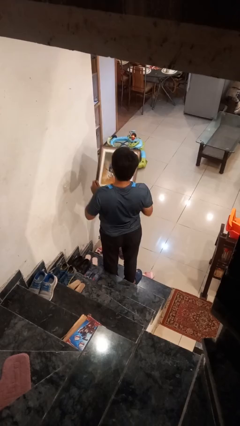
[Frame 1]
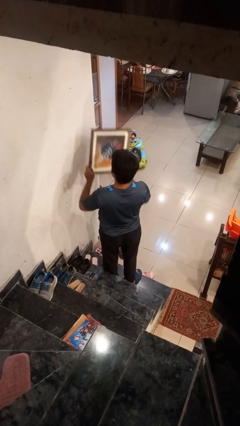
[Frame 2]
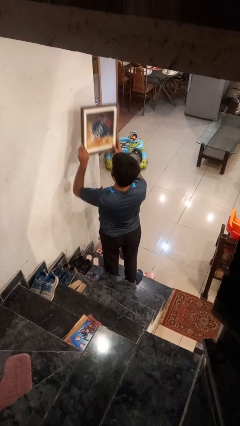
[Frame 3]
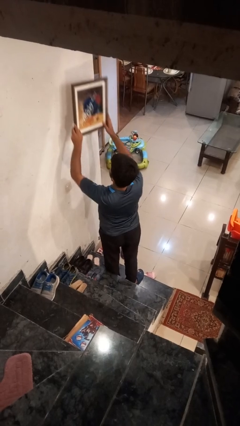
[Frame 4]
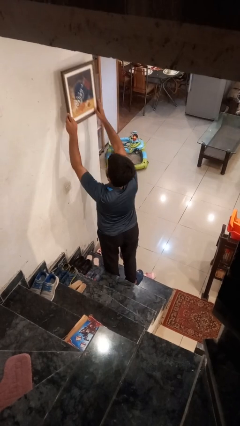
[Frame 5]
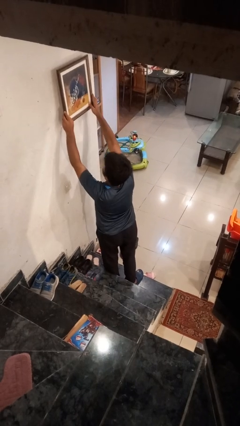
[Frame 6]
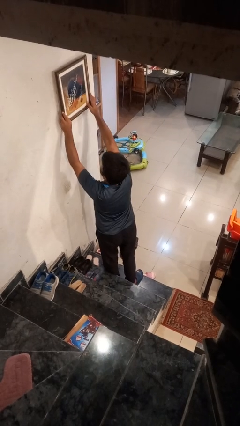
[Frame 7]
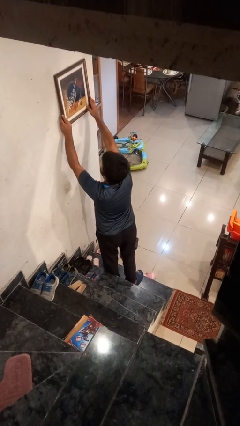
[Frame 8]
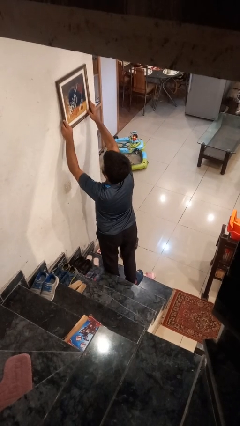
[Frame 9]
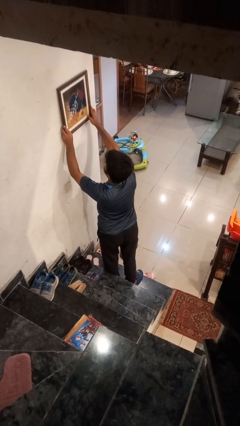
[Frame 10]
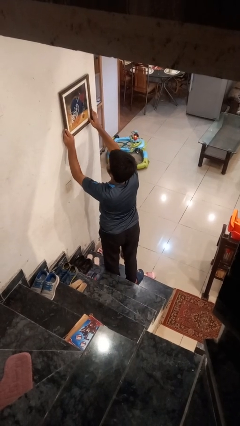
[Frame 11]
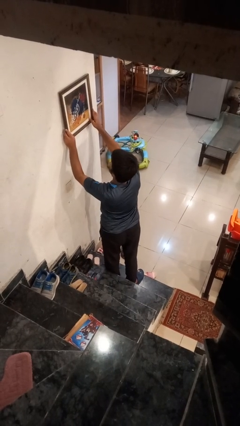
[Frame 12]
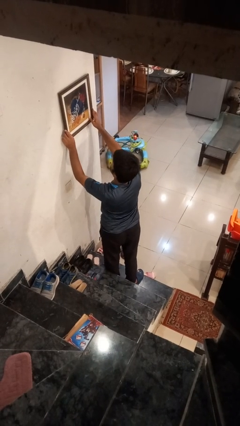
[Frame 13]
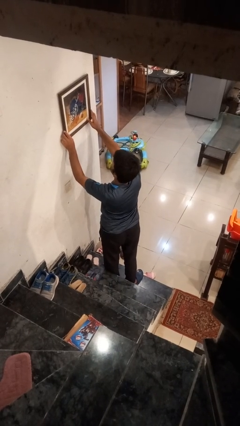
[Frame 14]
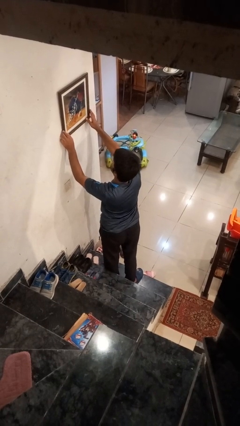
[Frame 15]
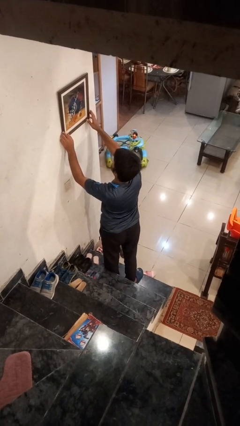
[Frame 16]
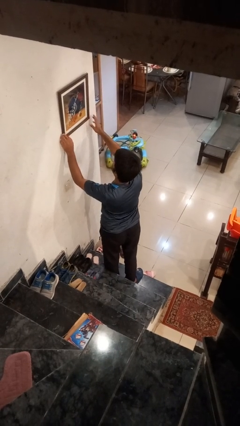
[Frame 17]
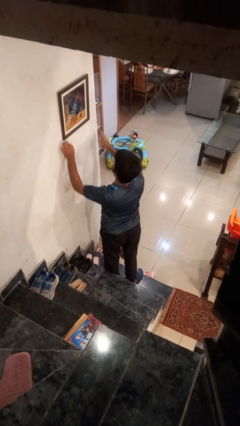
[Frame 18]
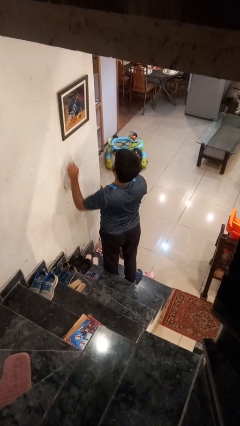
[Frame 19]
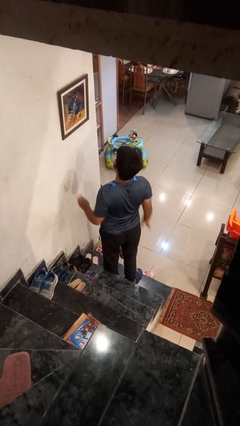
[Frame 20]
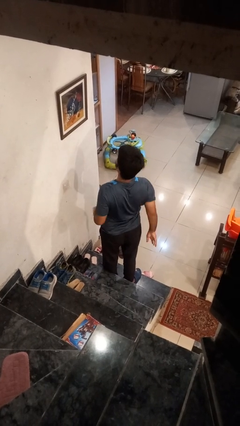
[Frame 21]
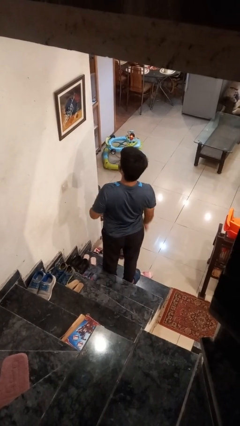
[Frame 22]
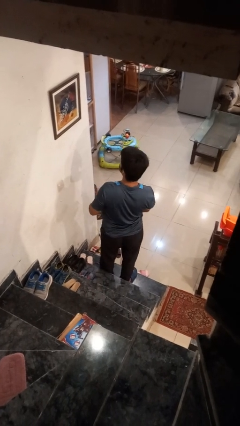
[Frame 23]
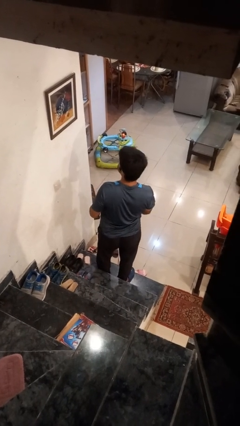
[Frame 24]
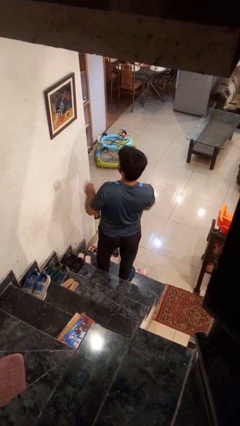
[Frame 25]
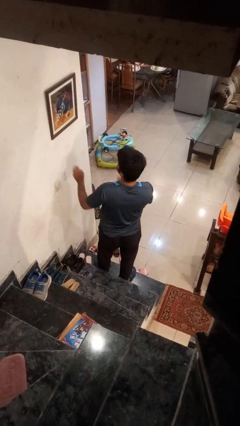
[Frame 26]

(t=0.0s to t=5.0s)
person puts up picture frame

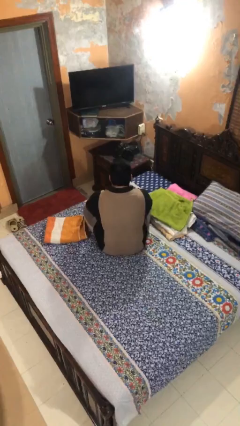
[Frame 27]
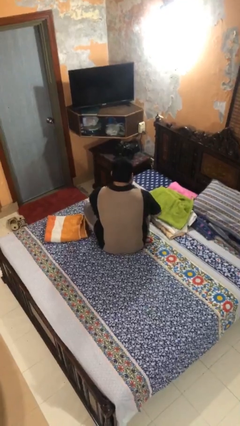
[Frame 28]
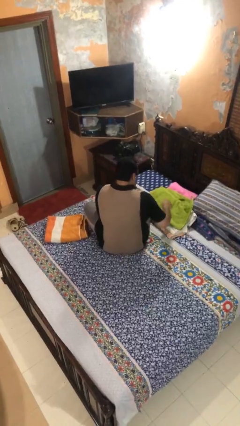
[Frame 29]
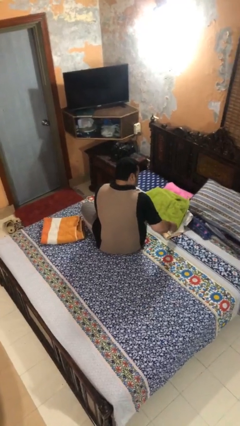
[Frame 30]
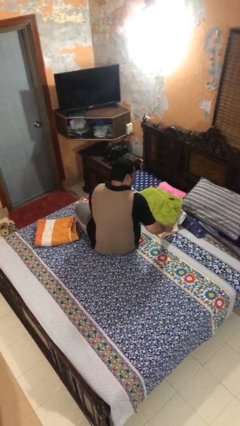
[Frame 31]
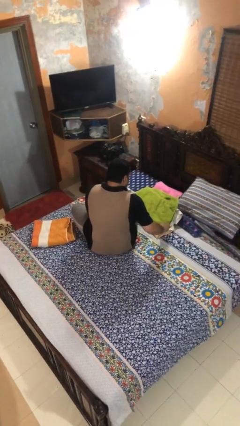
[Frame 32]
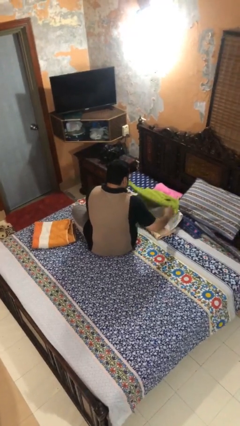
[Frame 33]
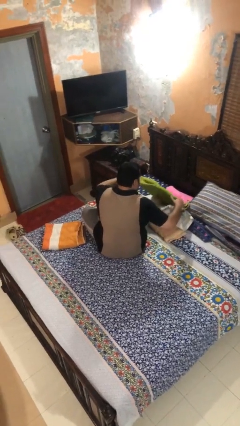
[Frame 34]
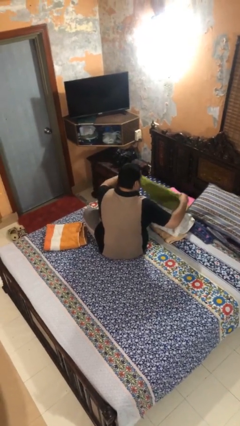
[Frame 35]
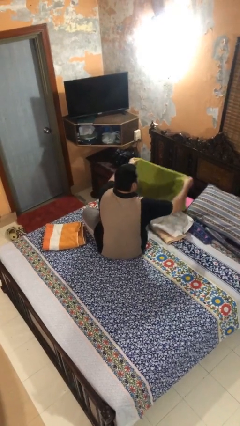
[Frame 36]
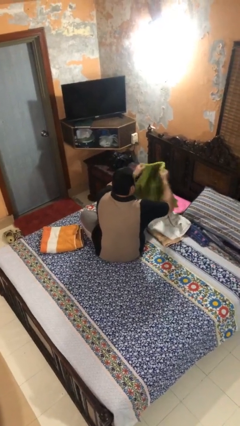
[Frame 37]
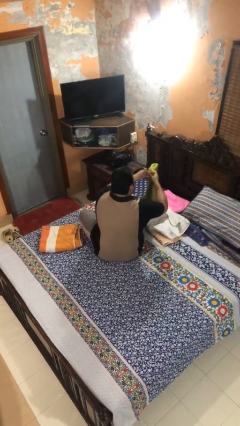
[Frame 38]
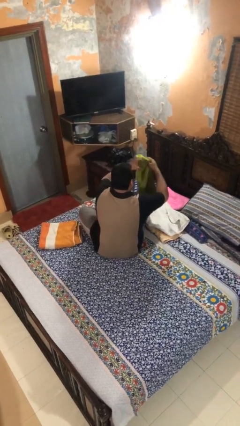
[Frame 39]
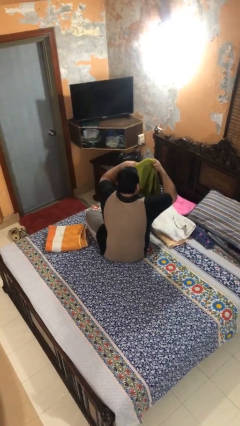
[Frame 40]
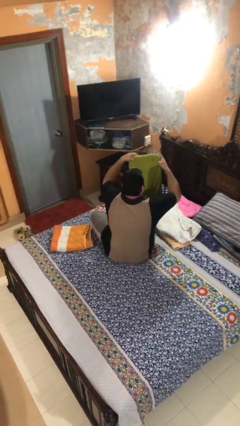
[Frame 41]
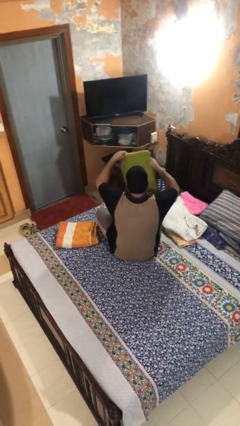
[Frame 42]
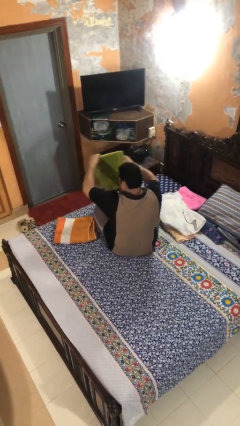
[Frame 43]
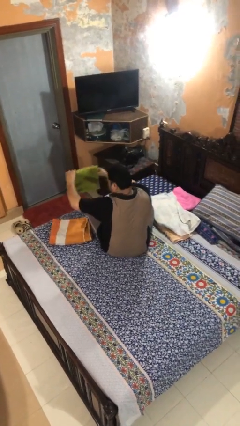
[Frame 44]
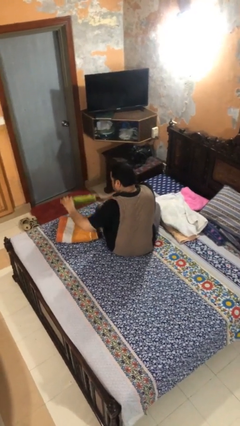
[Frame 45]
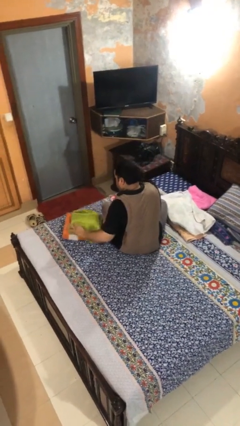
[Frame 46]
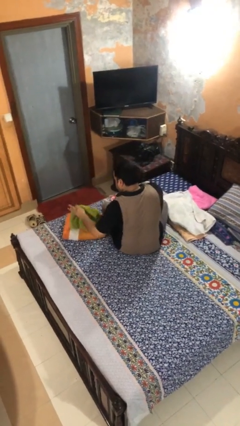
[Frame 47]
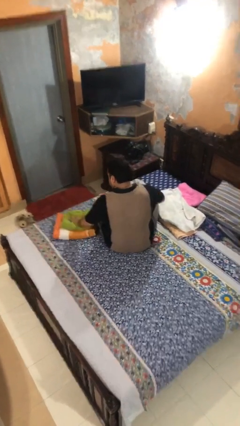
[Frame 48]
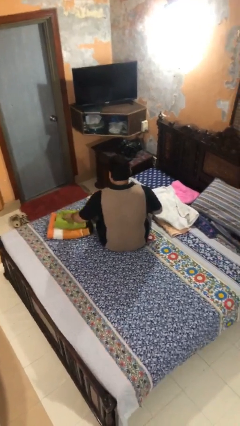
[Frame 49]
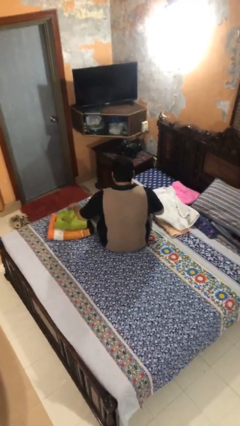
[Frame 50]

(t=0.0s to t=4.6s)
person folds towel

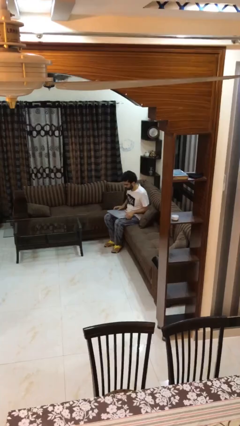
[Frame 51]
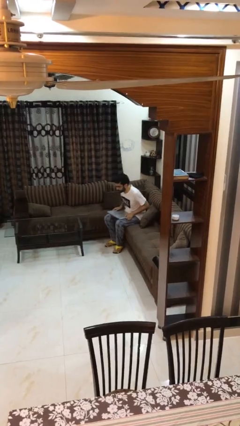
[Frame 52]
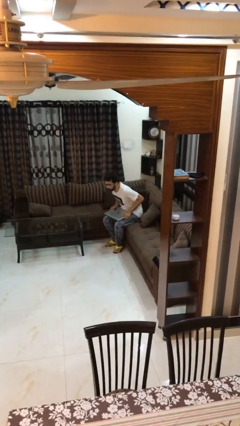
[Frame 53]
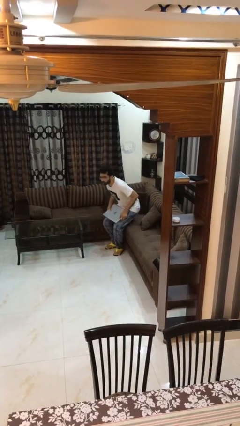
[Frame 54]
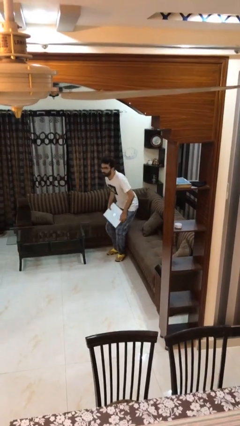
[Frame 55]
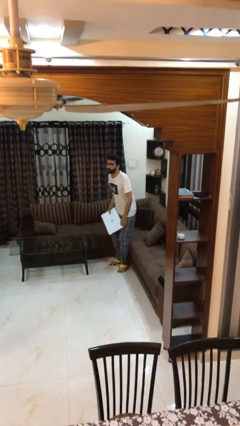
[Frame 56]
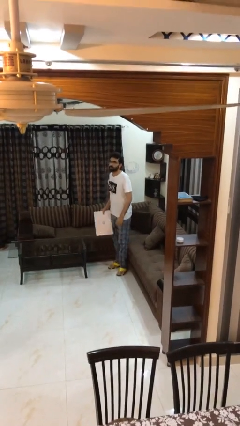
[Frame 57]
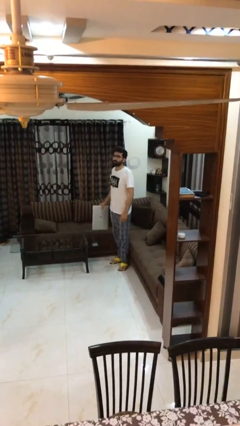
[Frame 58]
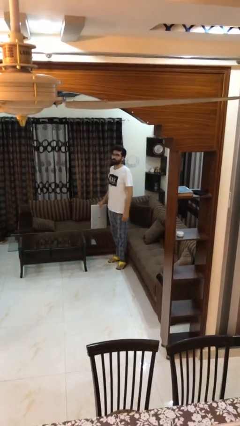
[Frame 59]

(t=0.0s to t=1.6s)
person stands up

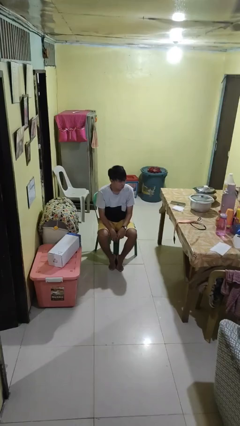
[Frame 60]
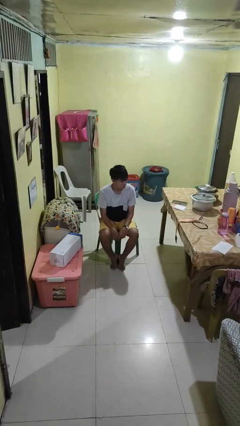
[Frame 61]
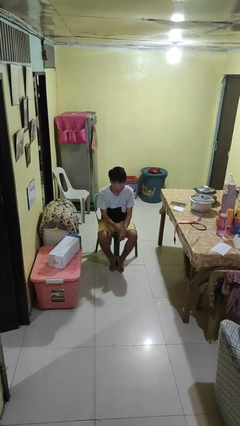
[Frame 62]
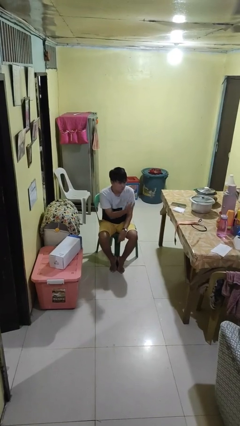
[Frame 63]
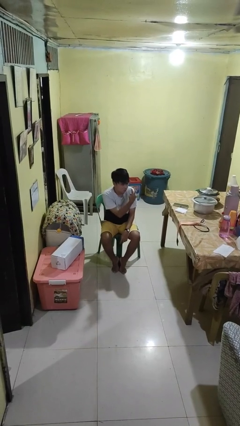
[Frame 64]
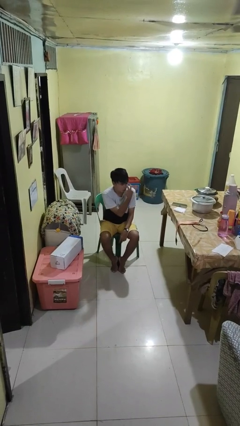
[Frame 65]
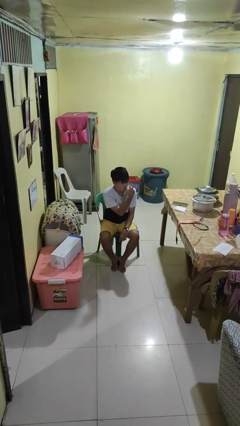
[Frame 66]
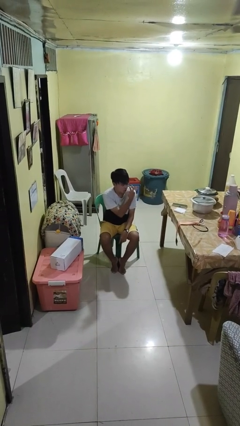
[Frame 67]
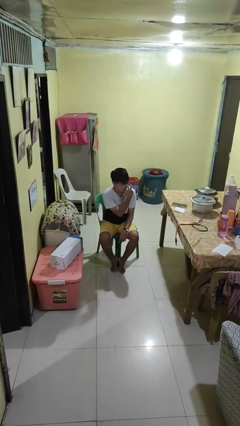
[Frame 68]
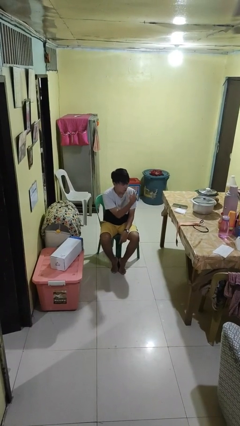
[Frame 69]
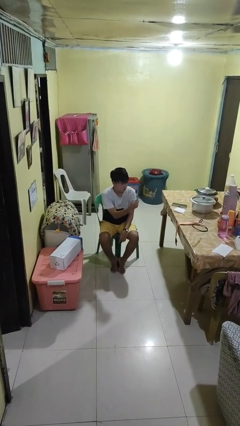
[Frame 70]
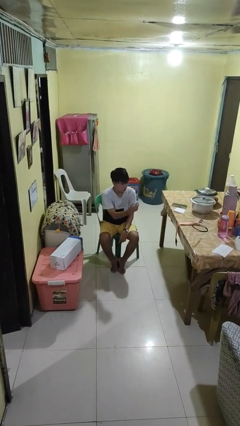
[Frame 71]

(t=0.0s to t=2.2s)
person gestures watch closely

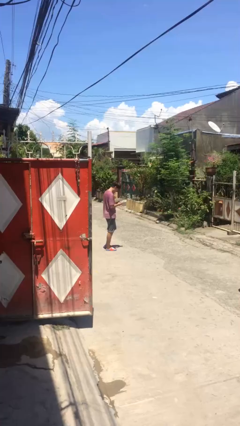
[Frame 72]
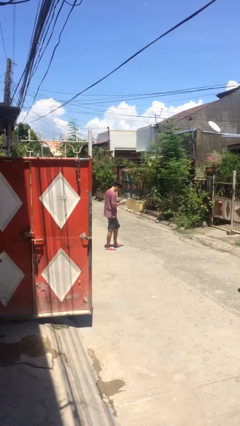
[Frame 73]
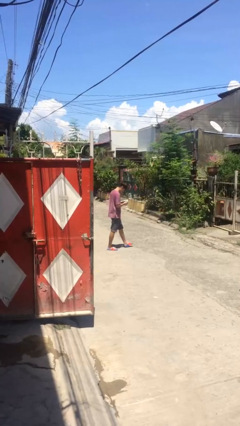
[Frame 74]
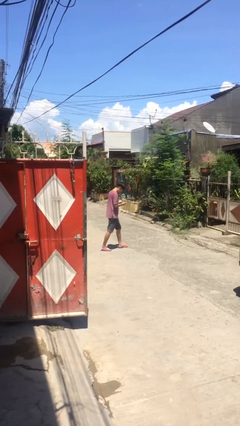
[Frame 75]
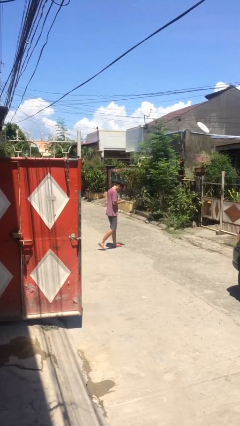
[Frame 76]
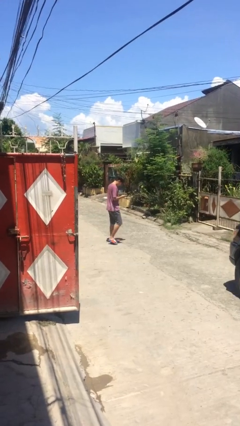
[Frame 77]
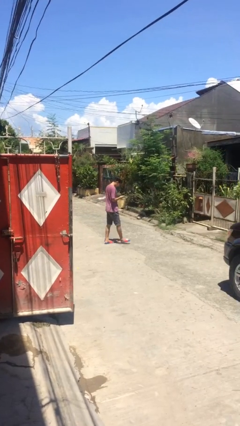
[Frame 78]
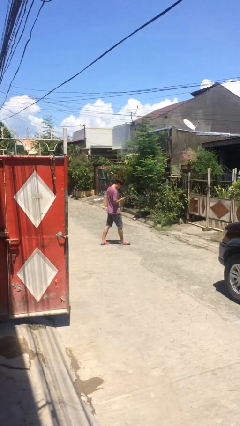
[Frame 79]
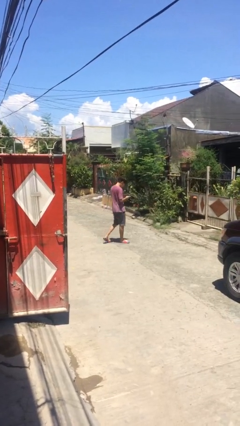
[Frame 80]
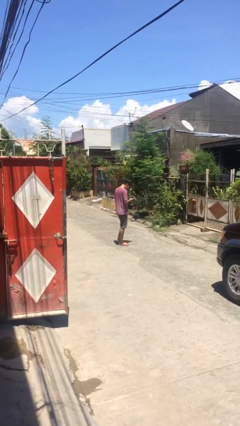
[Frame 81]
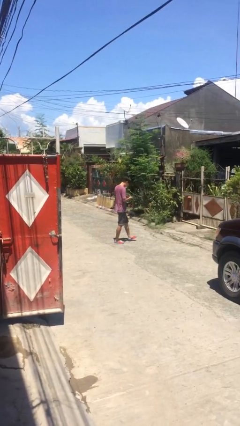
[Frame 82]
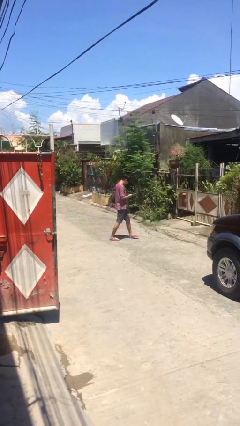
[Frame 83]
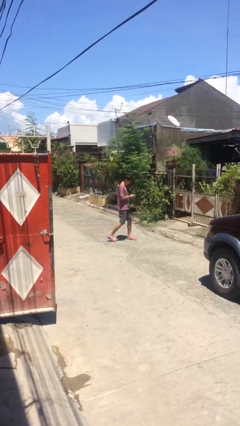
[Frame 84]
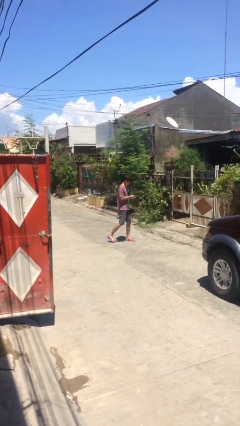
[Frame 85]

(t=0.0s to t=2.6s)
person texts on phone

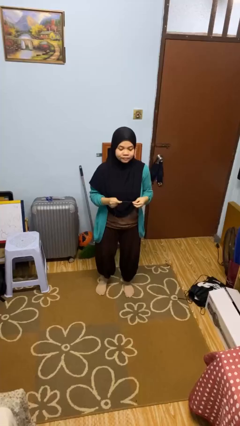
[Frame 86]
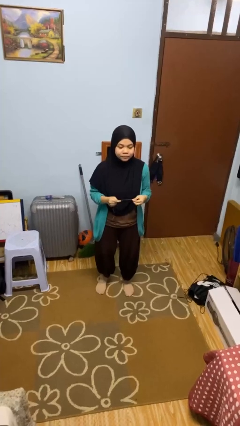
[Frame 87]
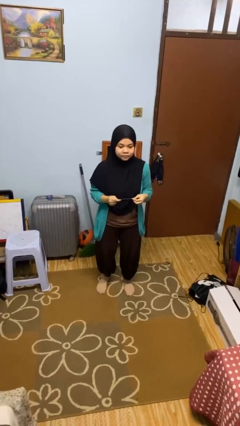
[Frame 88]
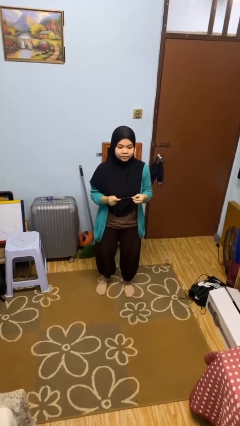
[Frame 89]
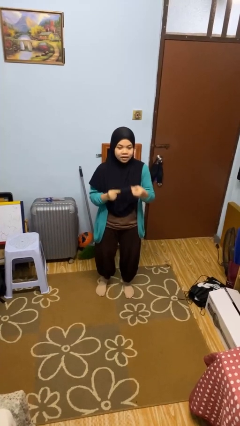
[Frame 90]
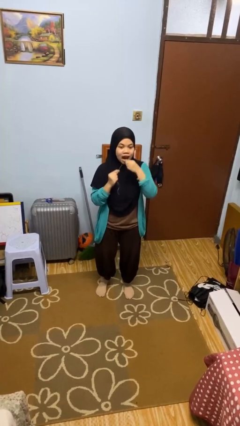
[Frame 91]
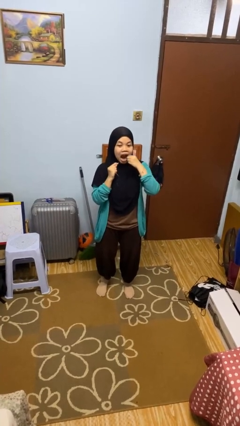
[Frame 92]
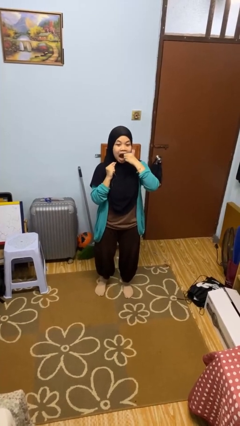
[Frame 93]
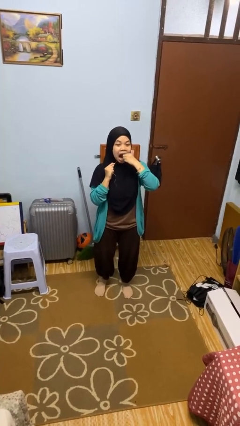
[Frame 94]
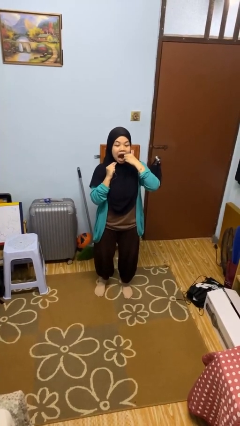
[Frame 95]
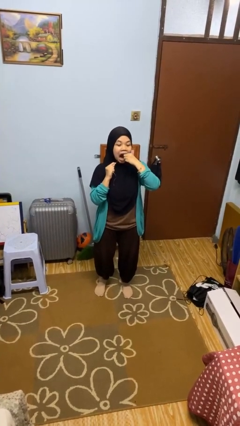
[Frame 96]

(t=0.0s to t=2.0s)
person flosses
